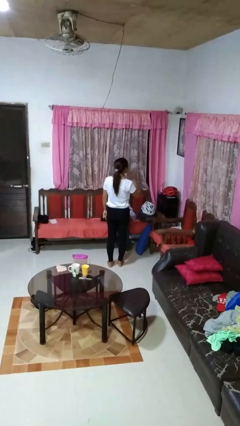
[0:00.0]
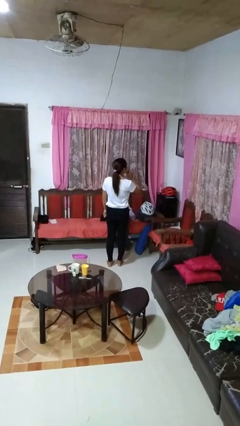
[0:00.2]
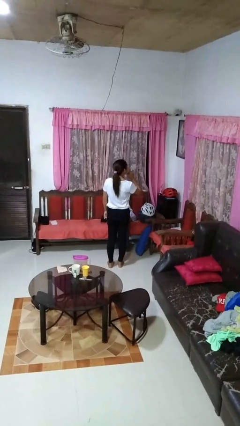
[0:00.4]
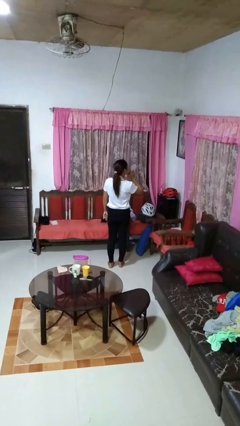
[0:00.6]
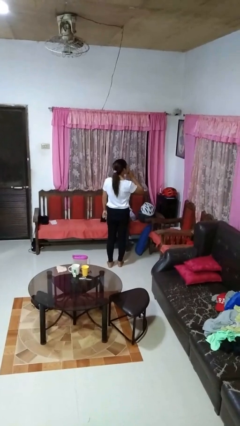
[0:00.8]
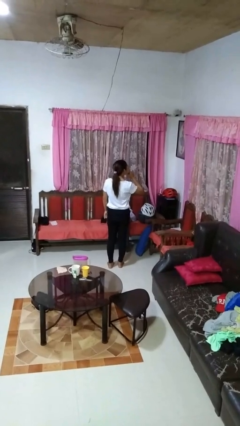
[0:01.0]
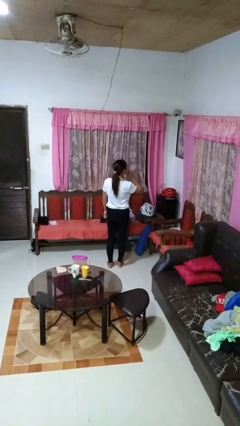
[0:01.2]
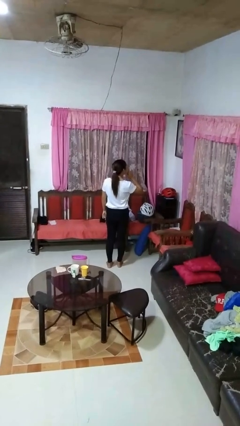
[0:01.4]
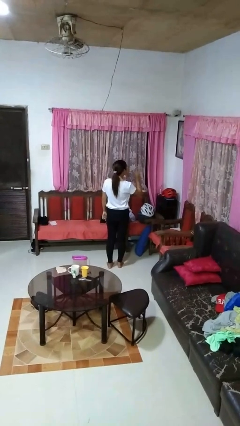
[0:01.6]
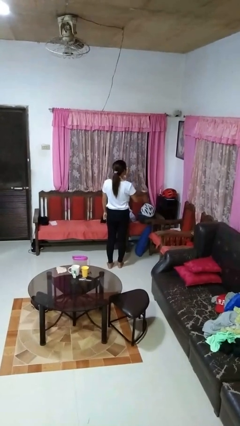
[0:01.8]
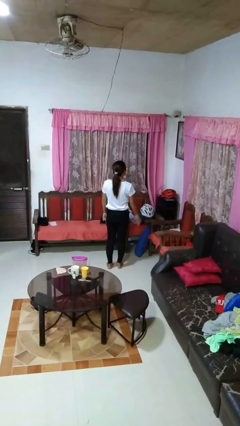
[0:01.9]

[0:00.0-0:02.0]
person gestures be quiet

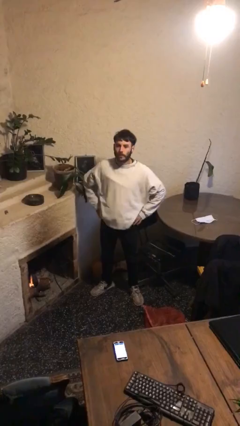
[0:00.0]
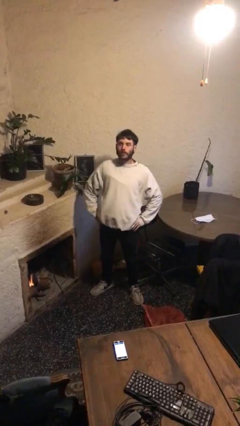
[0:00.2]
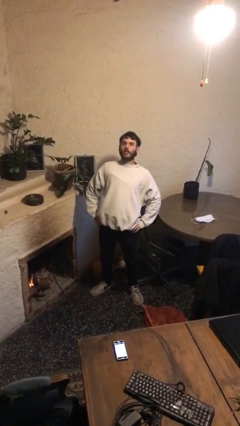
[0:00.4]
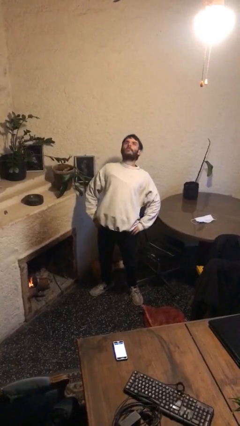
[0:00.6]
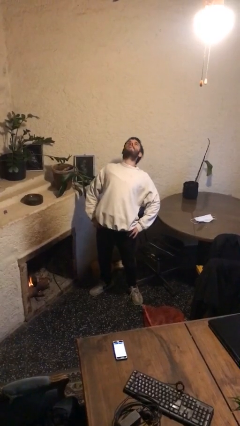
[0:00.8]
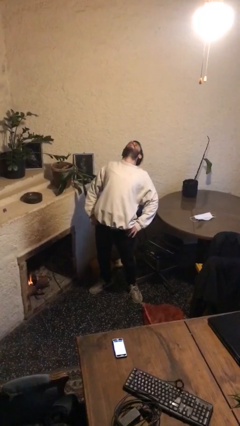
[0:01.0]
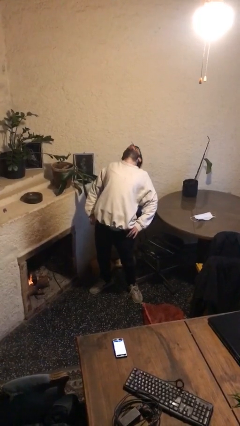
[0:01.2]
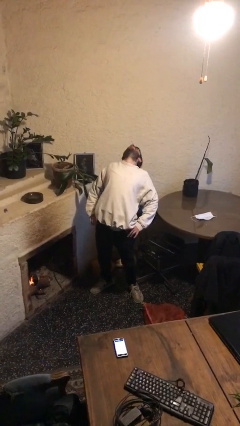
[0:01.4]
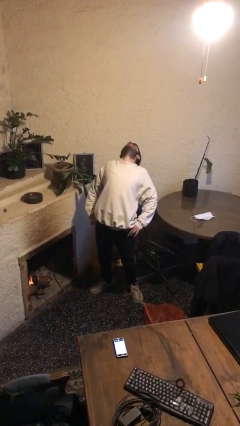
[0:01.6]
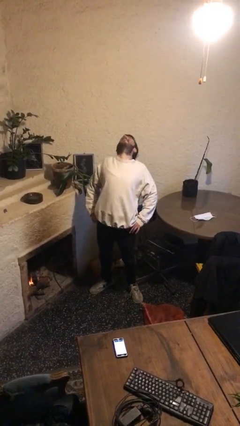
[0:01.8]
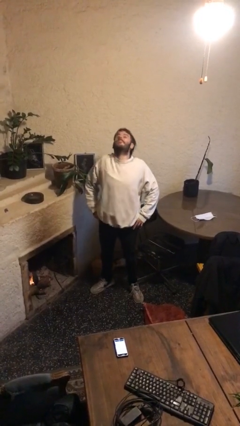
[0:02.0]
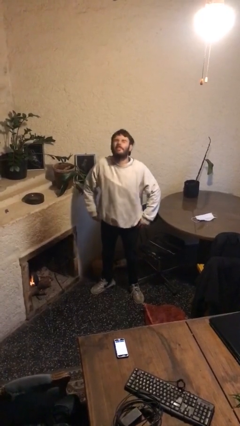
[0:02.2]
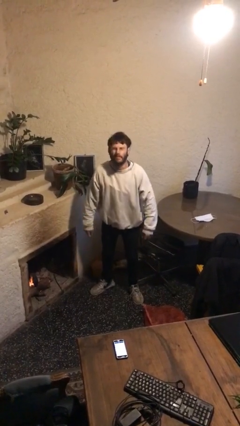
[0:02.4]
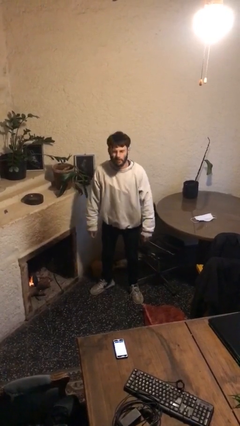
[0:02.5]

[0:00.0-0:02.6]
person stretches back

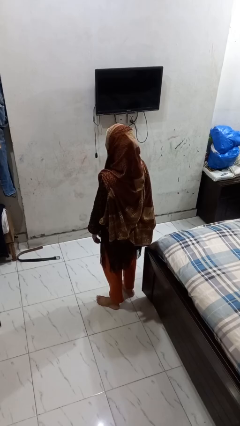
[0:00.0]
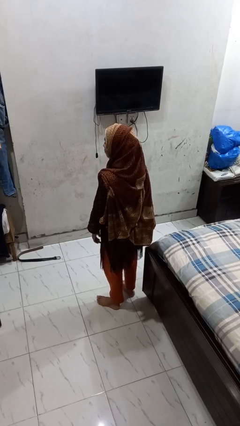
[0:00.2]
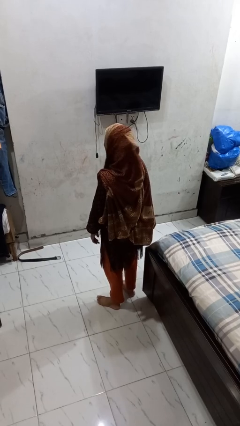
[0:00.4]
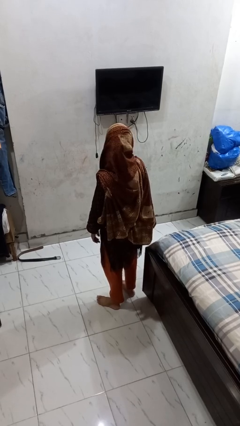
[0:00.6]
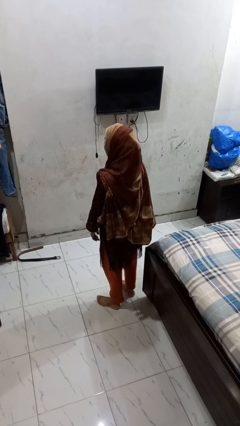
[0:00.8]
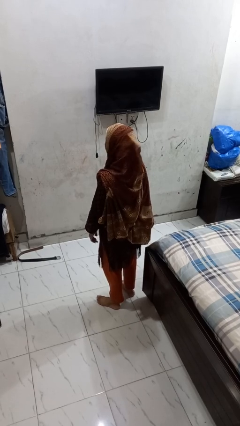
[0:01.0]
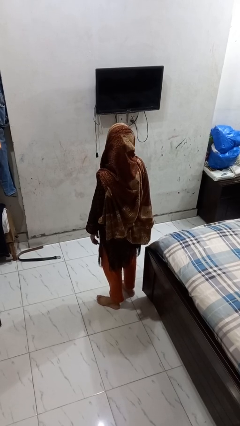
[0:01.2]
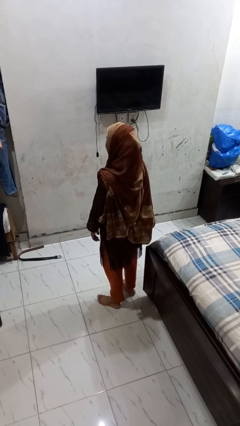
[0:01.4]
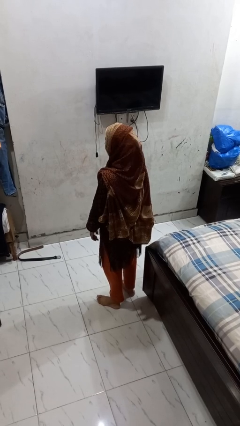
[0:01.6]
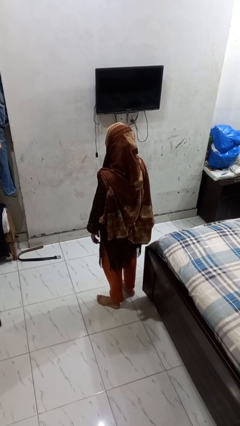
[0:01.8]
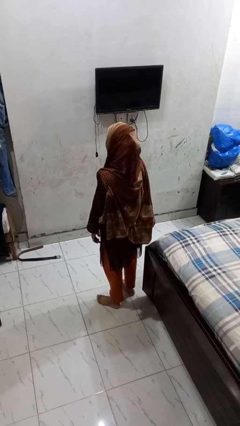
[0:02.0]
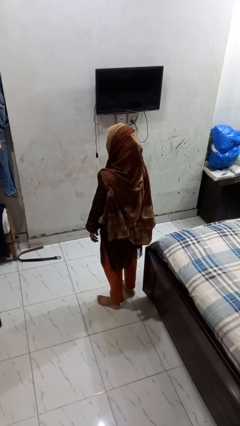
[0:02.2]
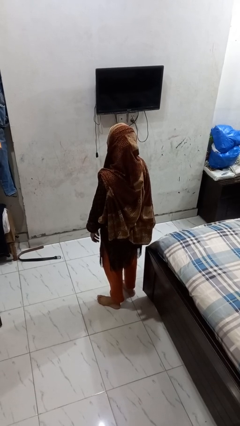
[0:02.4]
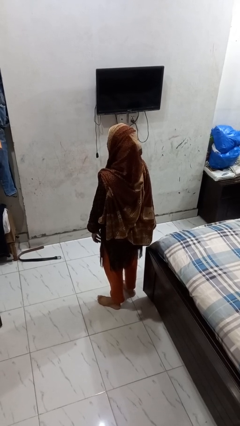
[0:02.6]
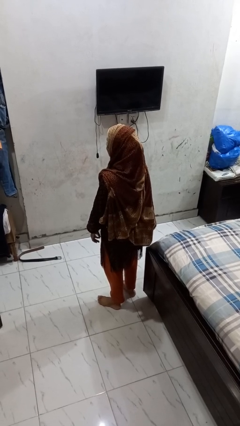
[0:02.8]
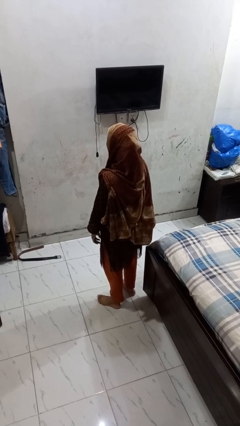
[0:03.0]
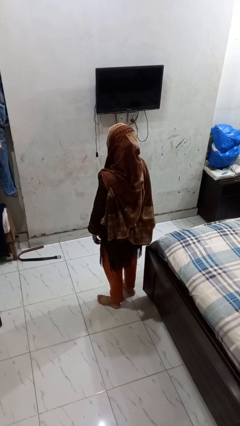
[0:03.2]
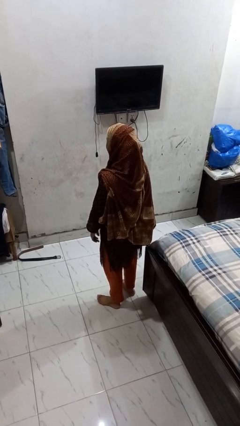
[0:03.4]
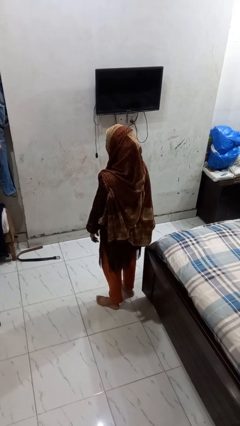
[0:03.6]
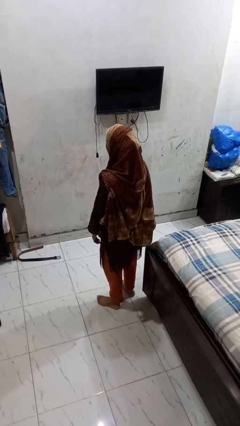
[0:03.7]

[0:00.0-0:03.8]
person shakes head

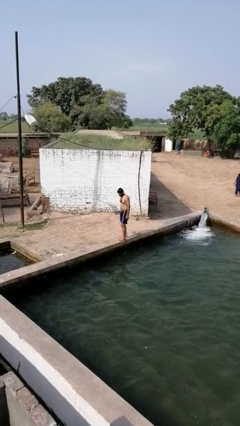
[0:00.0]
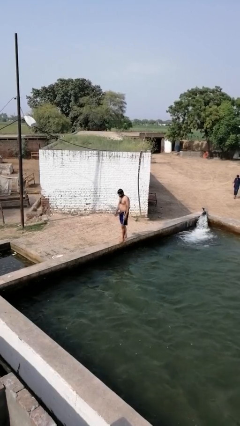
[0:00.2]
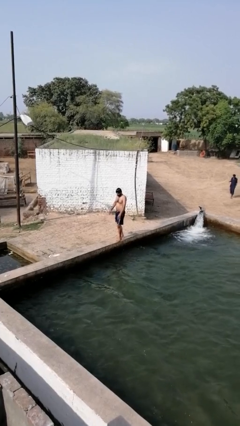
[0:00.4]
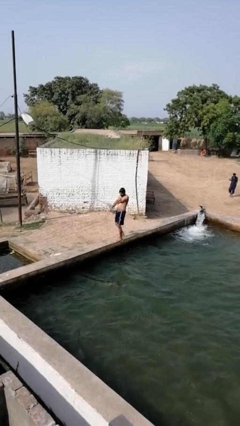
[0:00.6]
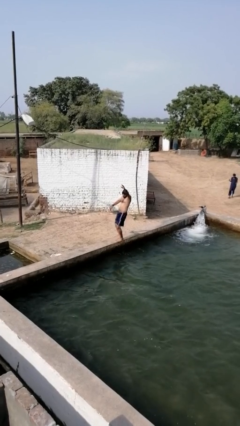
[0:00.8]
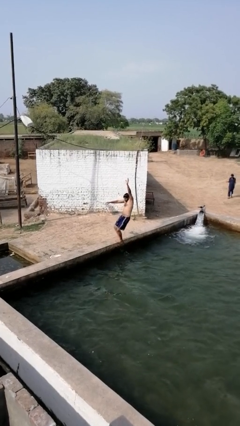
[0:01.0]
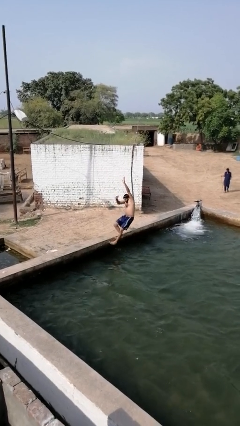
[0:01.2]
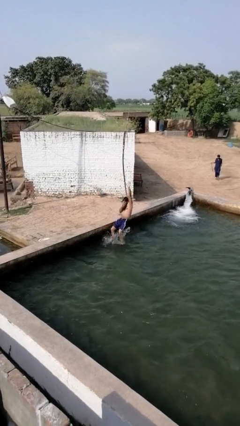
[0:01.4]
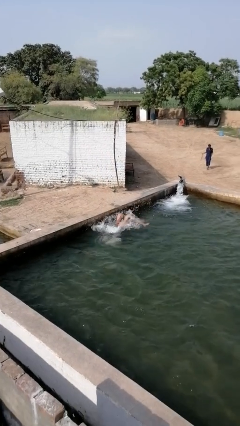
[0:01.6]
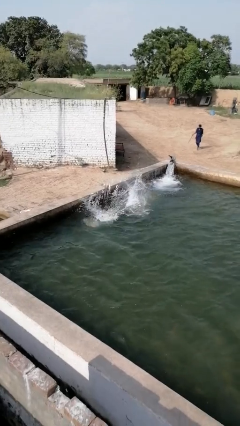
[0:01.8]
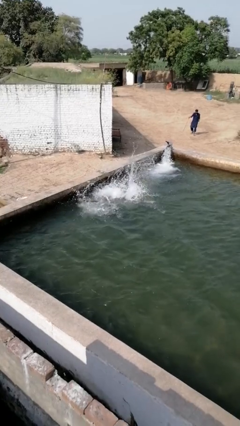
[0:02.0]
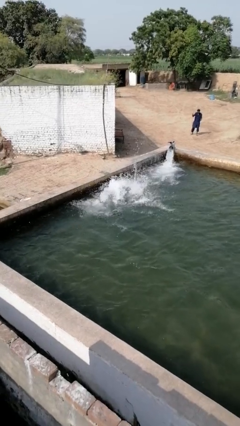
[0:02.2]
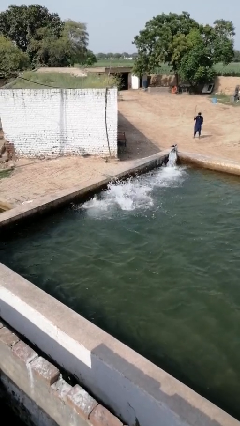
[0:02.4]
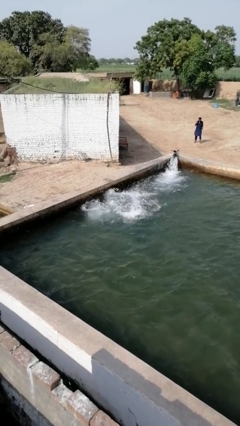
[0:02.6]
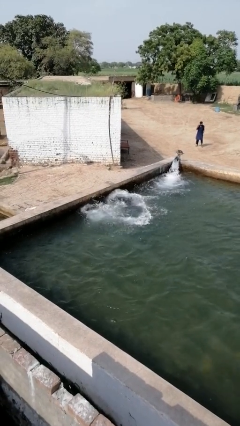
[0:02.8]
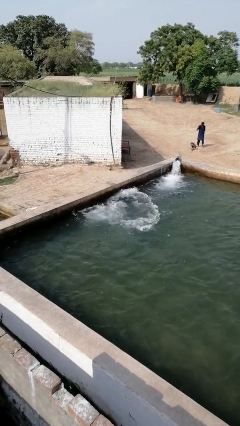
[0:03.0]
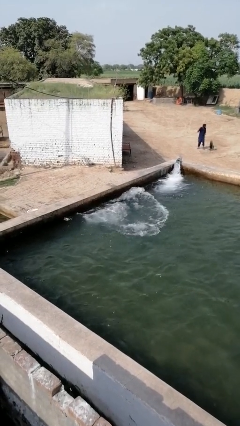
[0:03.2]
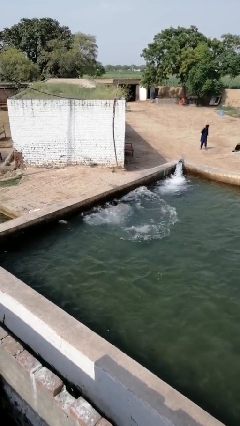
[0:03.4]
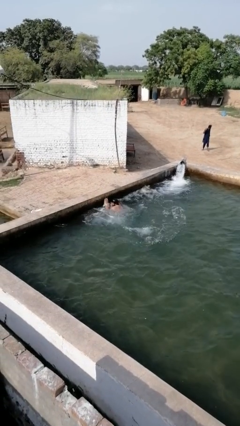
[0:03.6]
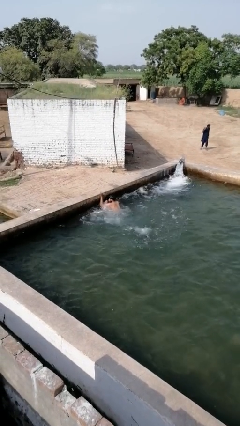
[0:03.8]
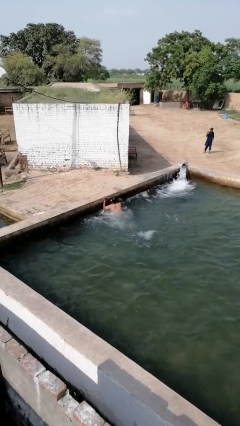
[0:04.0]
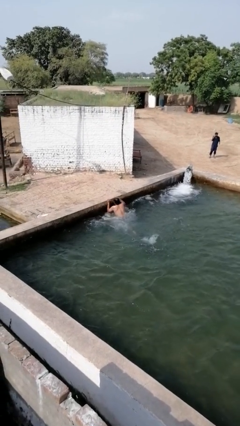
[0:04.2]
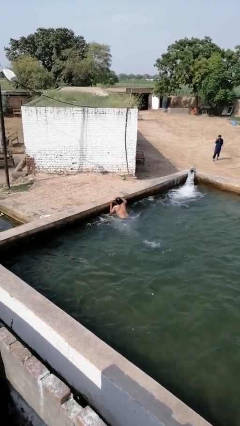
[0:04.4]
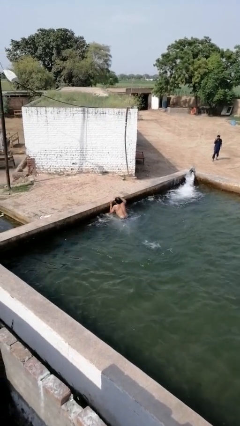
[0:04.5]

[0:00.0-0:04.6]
person falls into pool

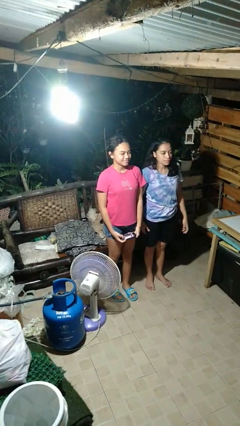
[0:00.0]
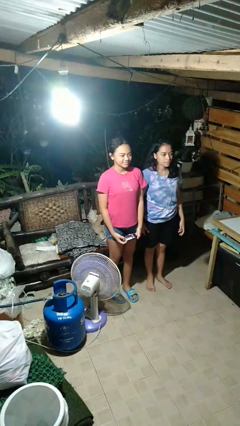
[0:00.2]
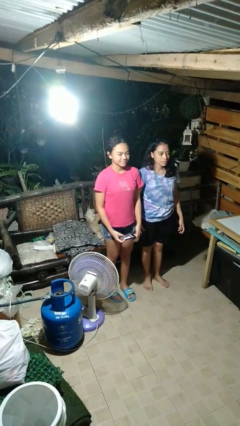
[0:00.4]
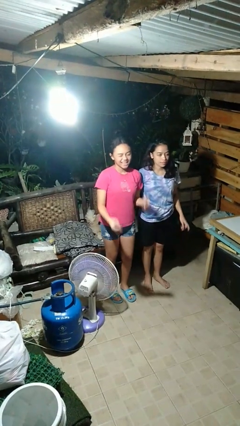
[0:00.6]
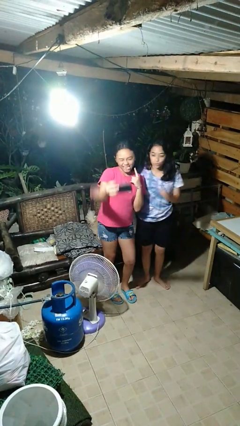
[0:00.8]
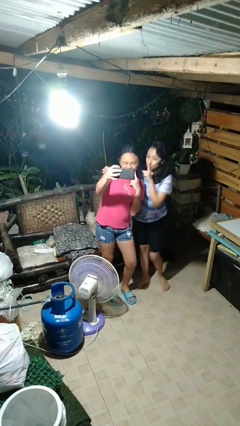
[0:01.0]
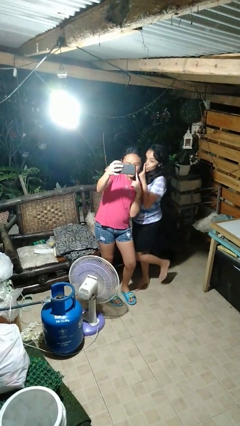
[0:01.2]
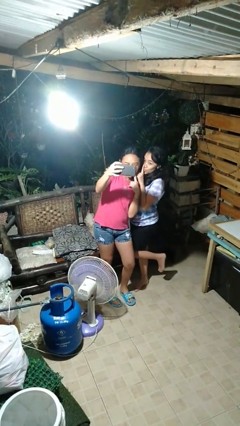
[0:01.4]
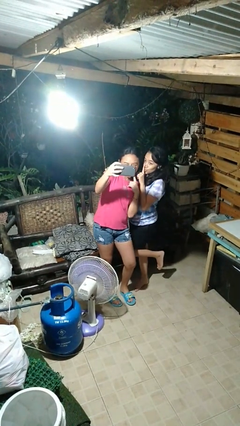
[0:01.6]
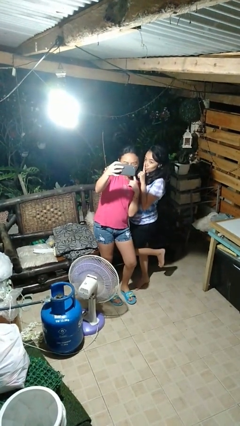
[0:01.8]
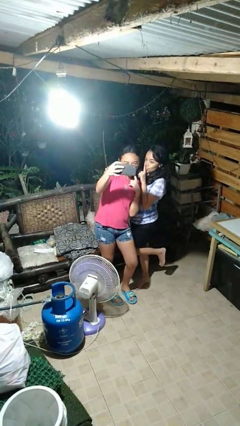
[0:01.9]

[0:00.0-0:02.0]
person takes selfie with person

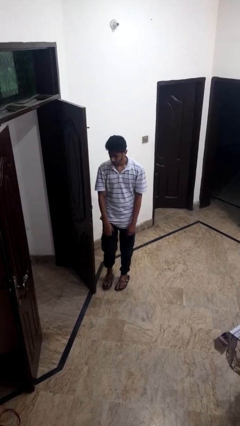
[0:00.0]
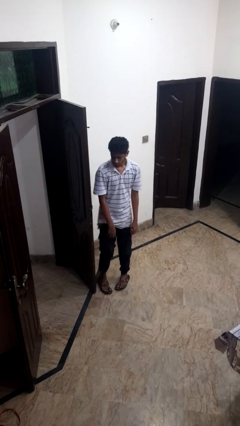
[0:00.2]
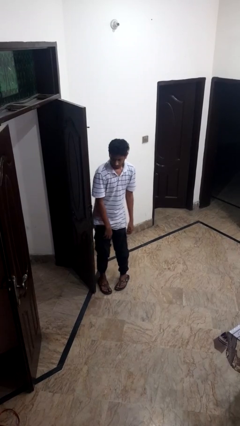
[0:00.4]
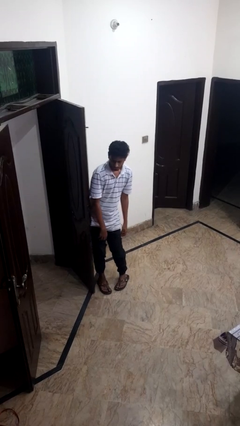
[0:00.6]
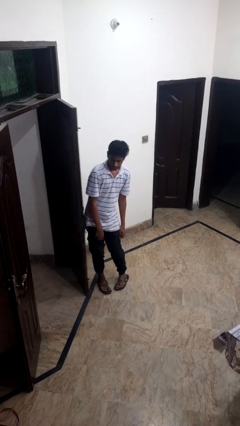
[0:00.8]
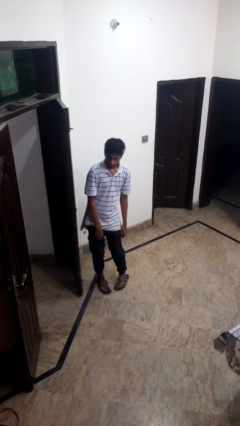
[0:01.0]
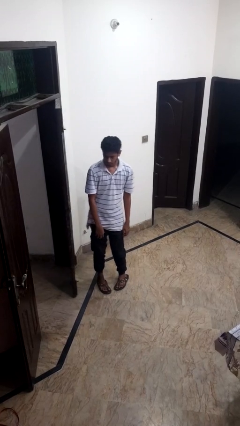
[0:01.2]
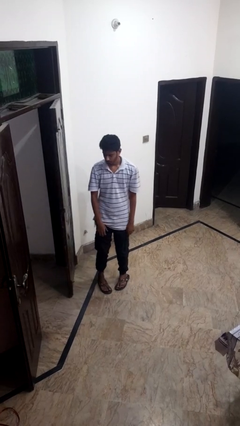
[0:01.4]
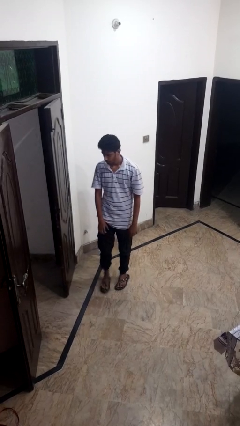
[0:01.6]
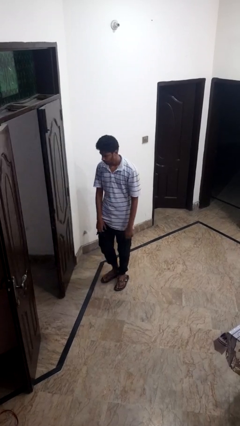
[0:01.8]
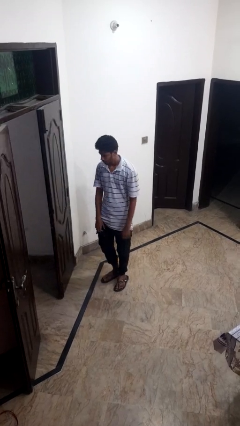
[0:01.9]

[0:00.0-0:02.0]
person closes door with hip

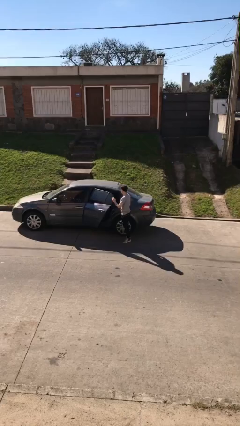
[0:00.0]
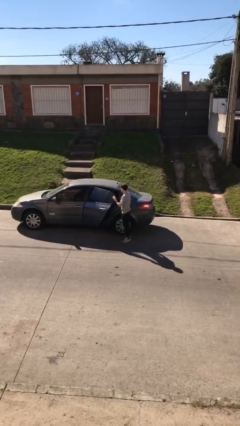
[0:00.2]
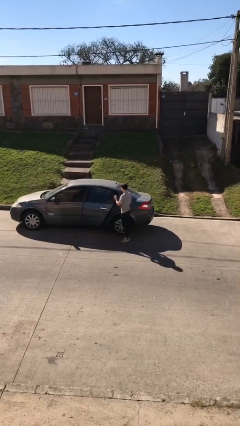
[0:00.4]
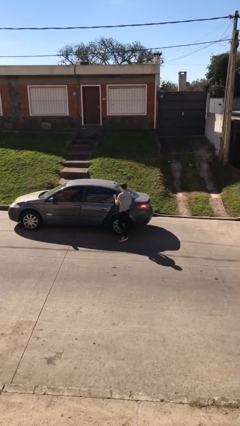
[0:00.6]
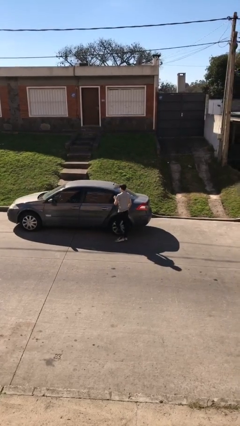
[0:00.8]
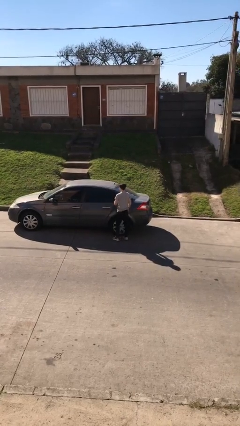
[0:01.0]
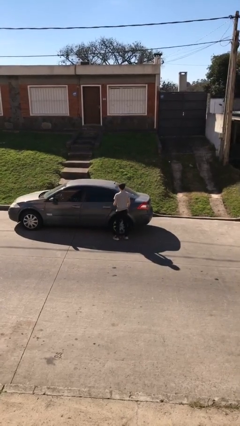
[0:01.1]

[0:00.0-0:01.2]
person closes car door
